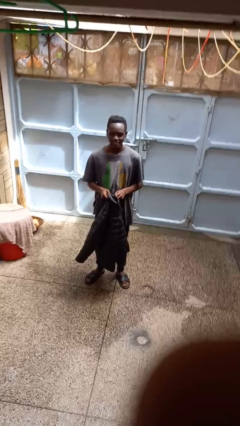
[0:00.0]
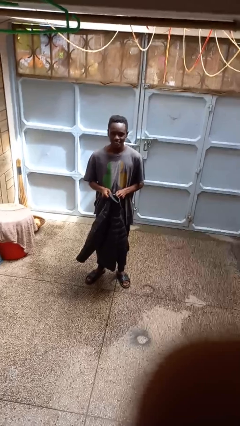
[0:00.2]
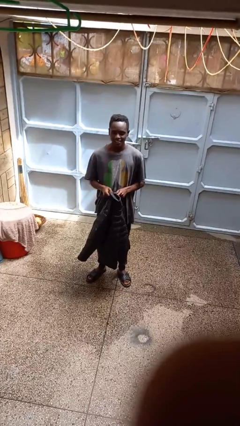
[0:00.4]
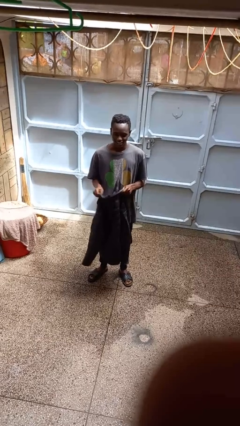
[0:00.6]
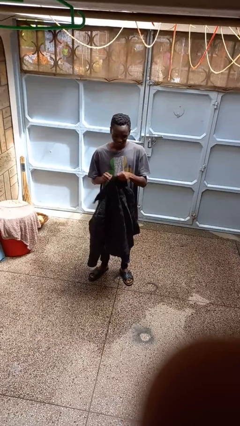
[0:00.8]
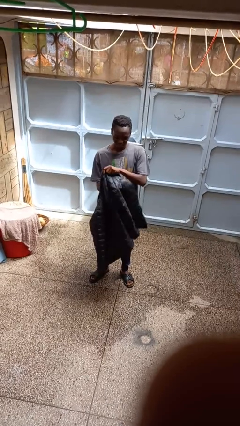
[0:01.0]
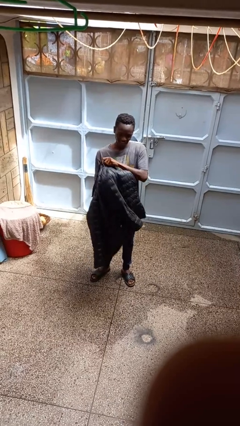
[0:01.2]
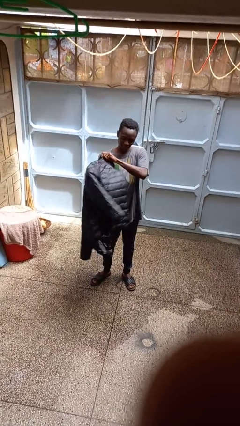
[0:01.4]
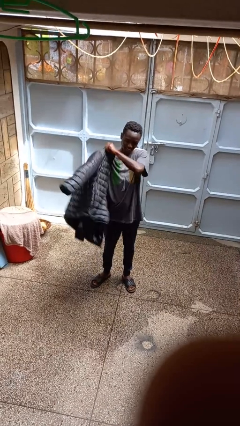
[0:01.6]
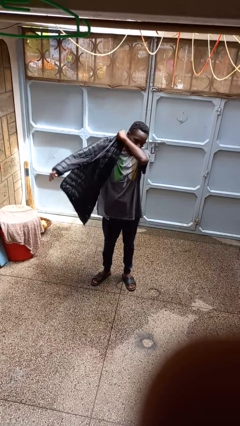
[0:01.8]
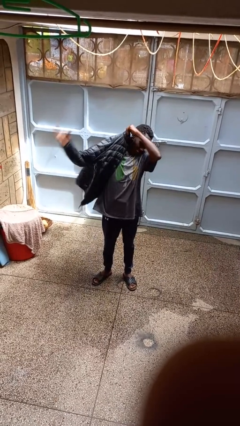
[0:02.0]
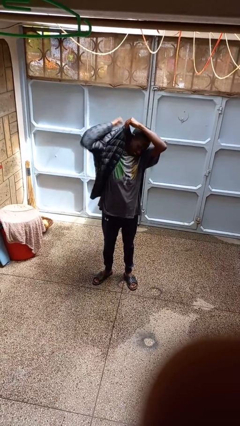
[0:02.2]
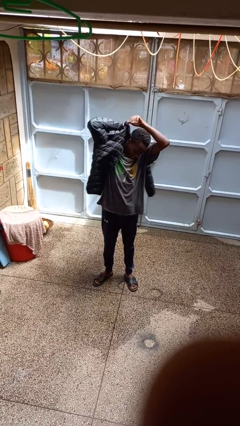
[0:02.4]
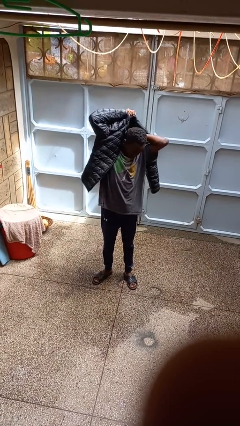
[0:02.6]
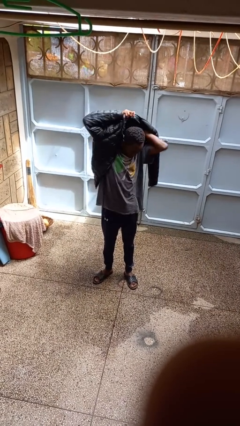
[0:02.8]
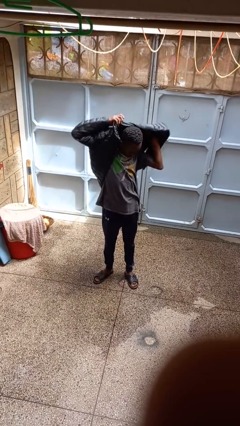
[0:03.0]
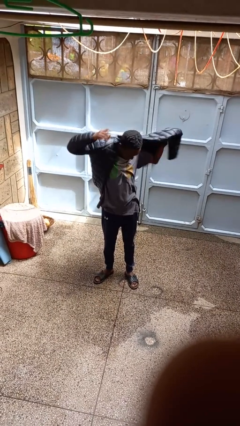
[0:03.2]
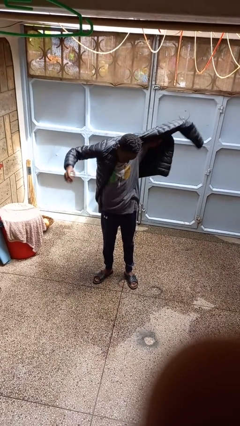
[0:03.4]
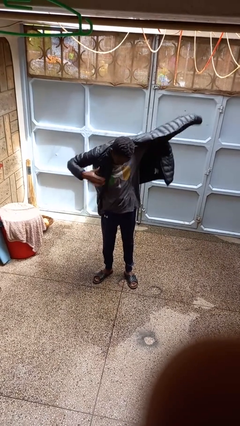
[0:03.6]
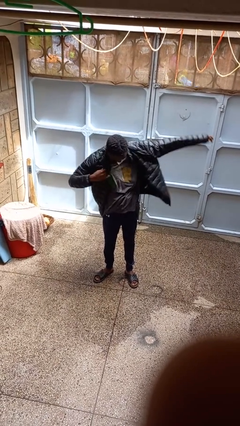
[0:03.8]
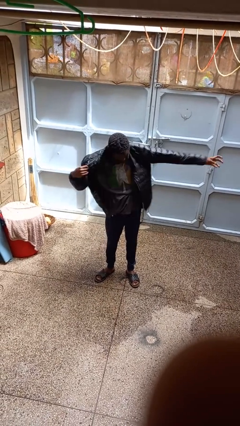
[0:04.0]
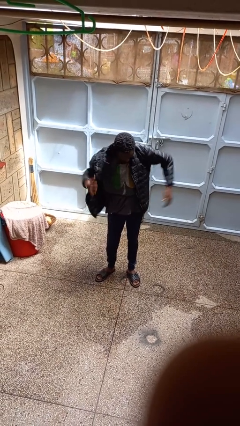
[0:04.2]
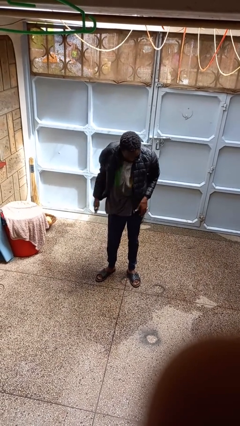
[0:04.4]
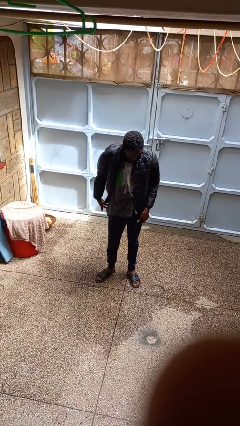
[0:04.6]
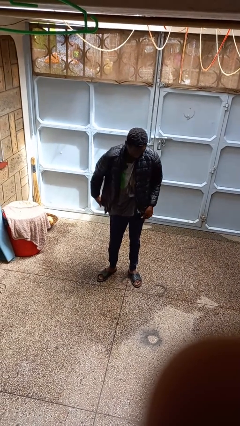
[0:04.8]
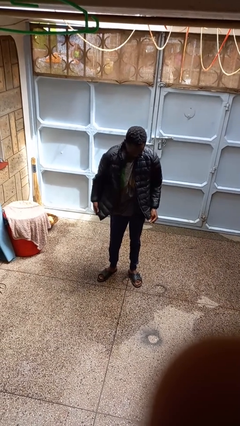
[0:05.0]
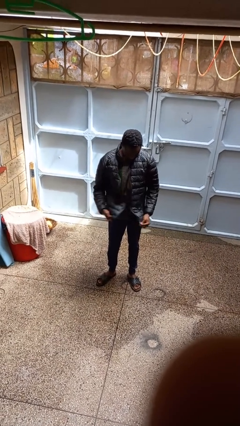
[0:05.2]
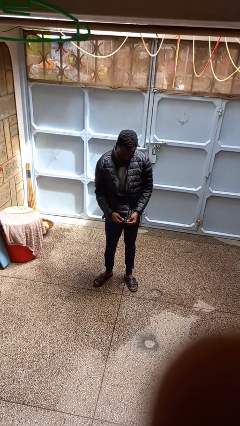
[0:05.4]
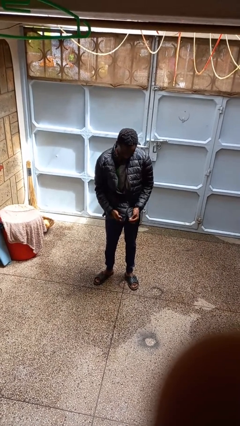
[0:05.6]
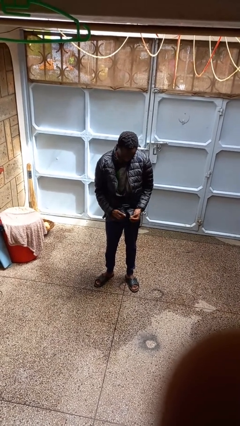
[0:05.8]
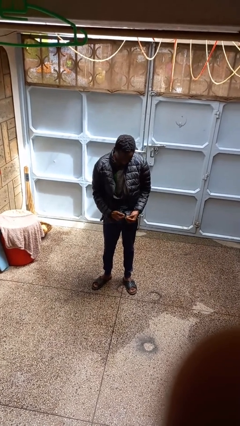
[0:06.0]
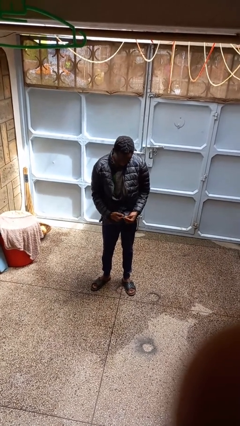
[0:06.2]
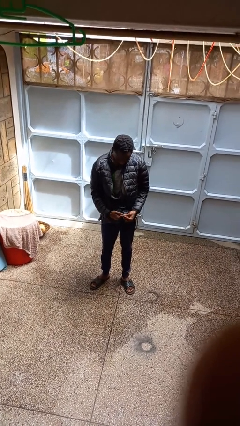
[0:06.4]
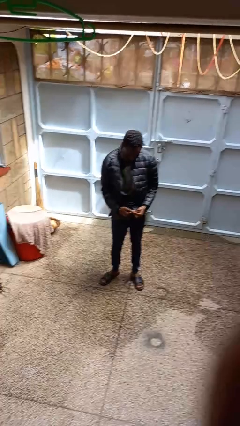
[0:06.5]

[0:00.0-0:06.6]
person puts on jacket

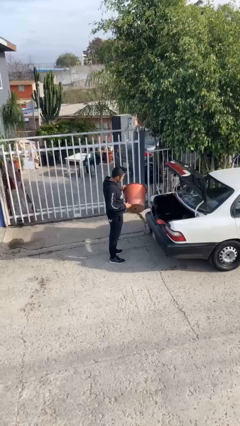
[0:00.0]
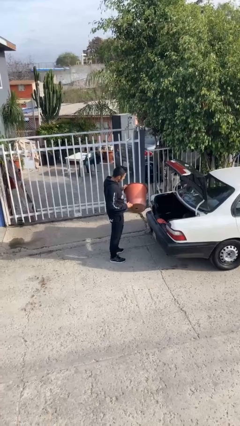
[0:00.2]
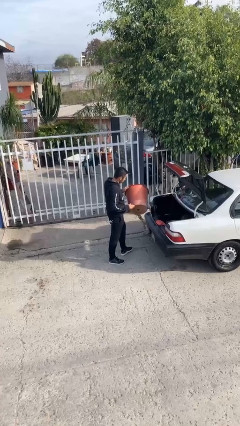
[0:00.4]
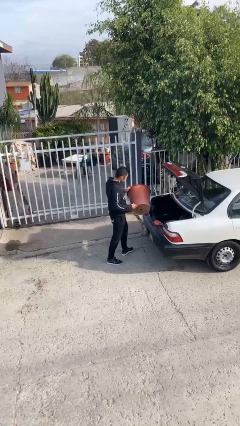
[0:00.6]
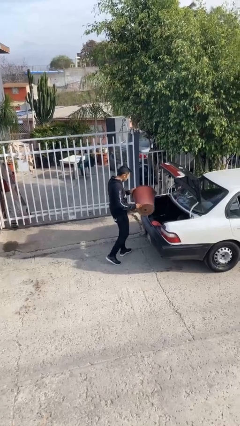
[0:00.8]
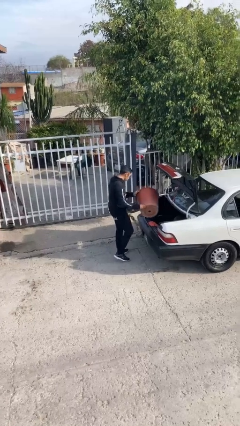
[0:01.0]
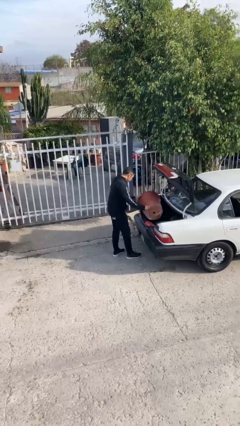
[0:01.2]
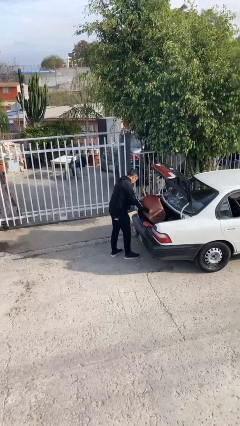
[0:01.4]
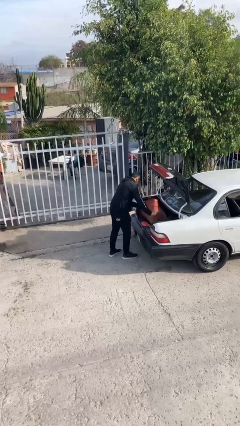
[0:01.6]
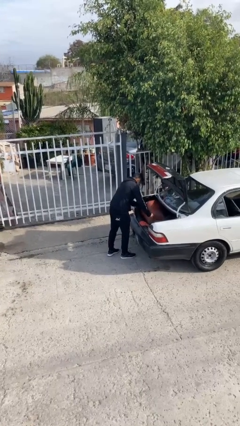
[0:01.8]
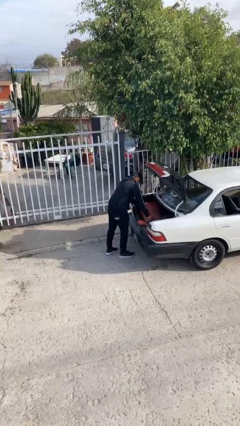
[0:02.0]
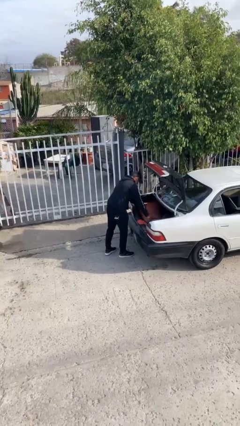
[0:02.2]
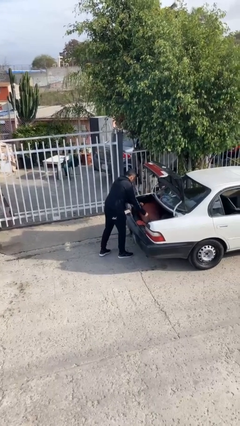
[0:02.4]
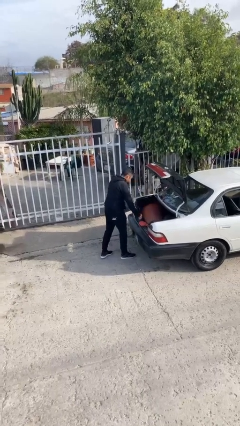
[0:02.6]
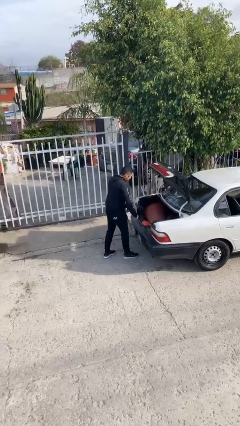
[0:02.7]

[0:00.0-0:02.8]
person loads car

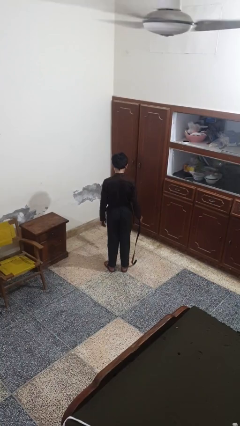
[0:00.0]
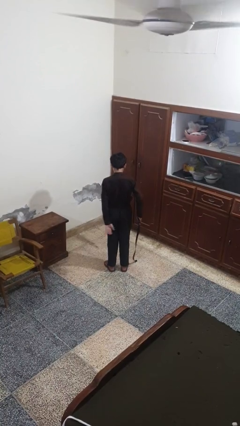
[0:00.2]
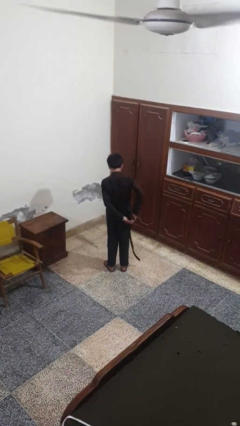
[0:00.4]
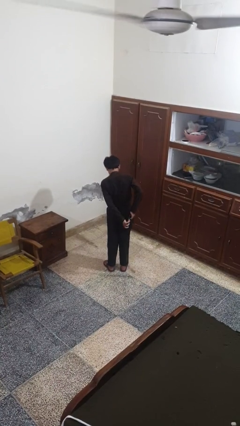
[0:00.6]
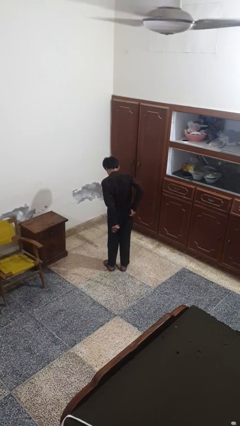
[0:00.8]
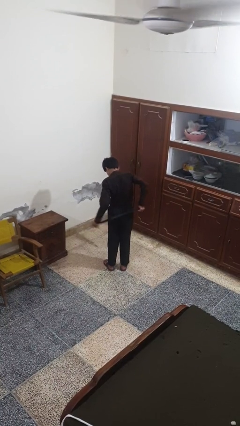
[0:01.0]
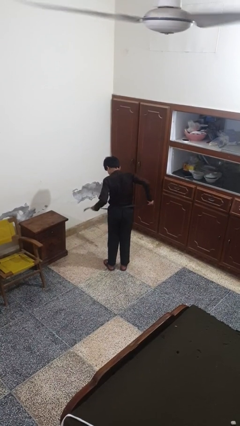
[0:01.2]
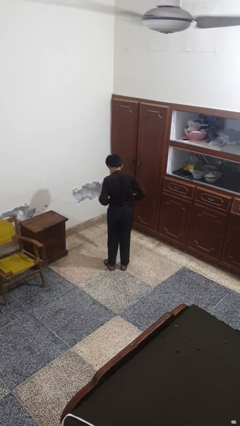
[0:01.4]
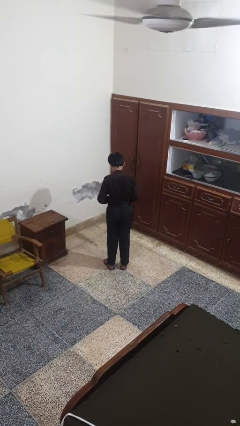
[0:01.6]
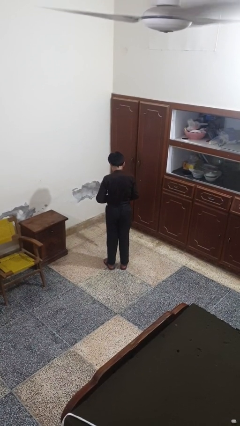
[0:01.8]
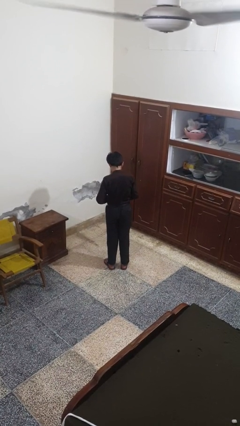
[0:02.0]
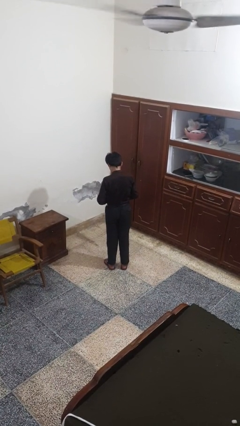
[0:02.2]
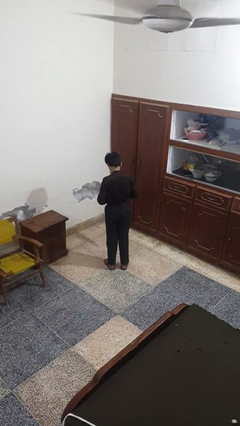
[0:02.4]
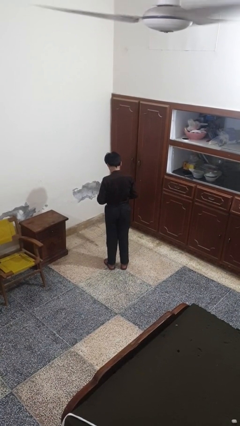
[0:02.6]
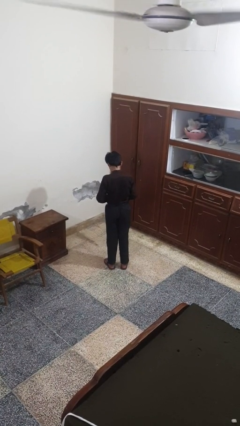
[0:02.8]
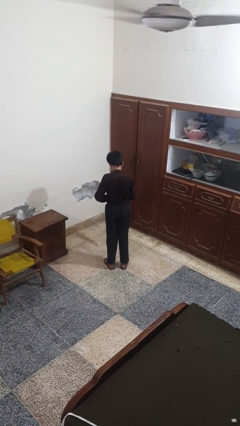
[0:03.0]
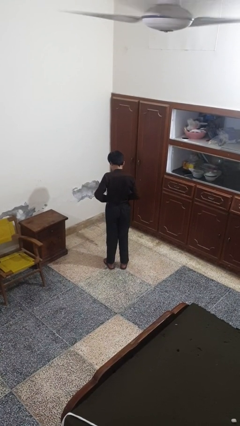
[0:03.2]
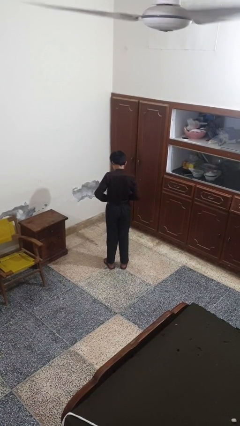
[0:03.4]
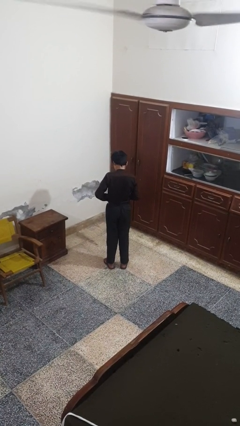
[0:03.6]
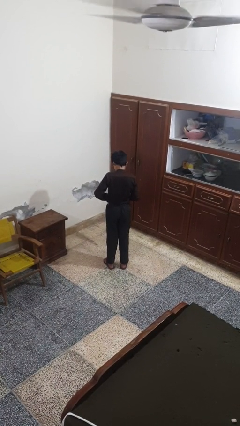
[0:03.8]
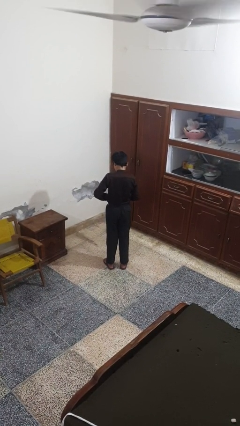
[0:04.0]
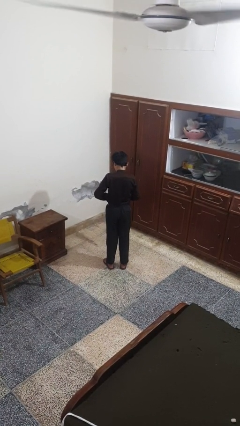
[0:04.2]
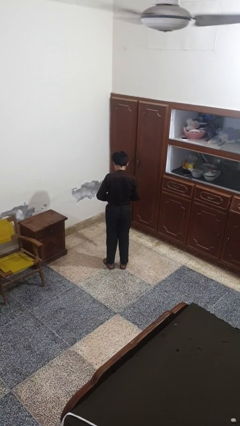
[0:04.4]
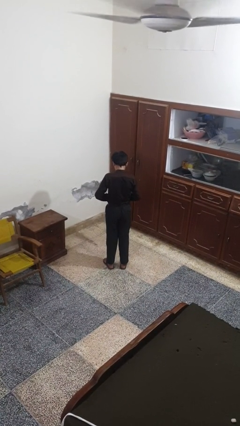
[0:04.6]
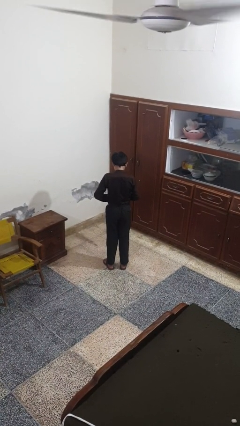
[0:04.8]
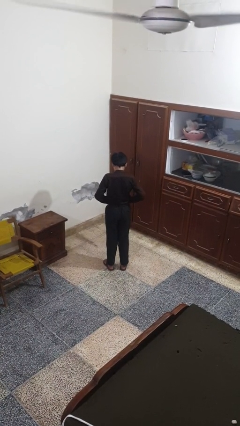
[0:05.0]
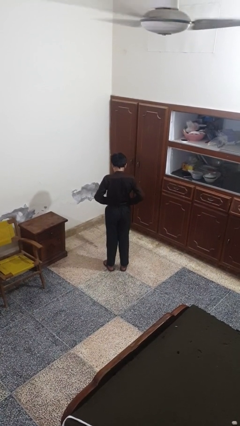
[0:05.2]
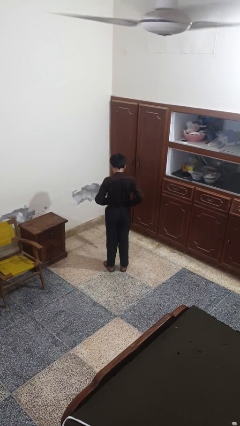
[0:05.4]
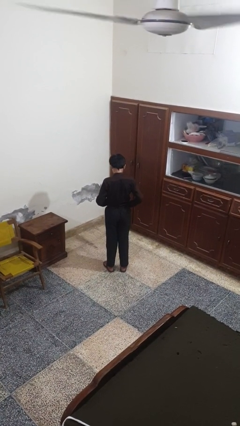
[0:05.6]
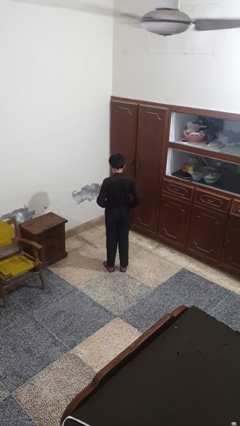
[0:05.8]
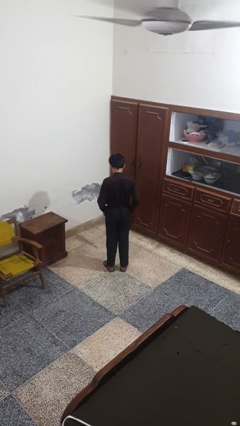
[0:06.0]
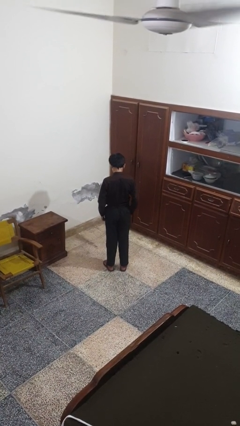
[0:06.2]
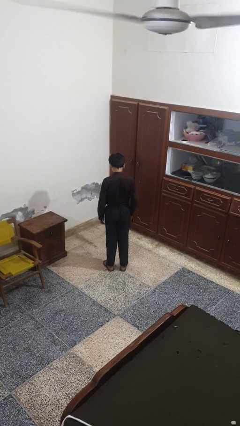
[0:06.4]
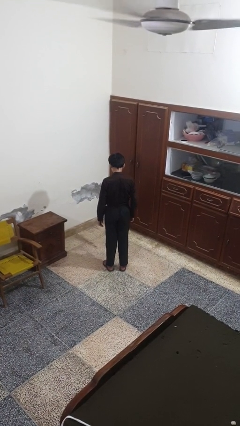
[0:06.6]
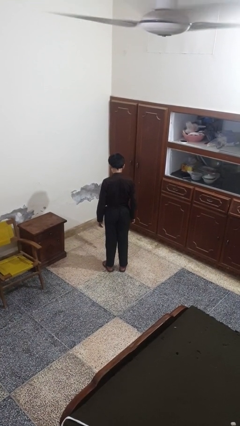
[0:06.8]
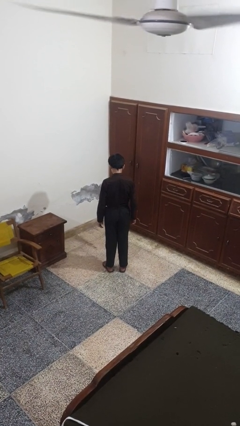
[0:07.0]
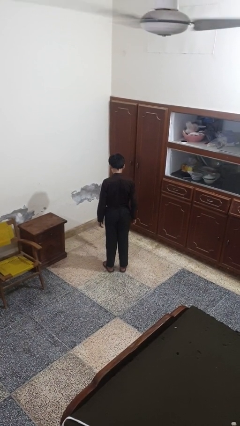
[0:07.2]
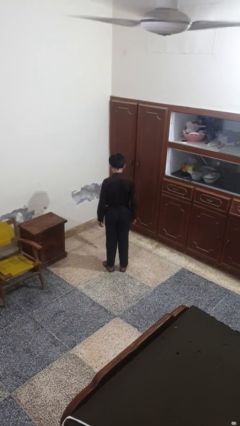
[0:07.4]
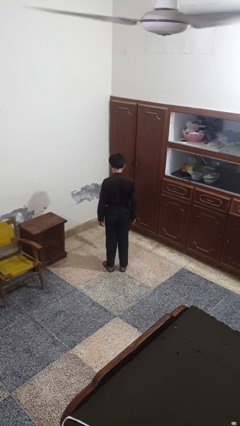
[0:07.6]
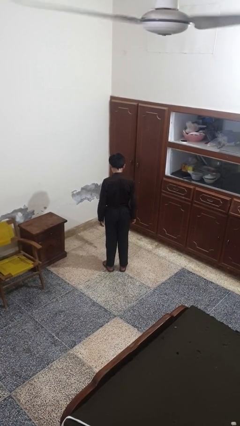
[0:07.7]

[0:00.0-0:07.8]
person puts on belt

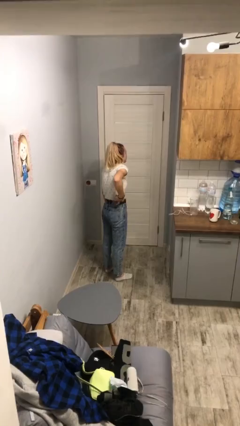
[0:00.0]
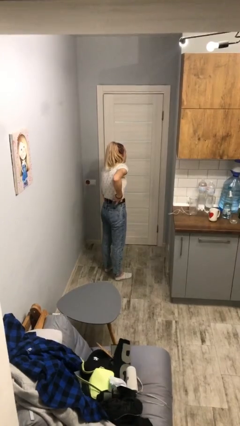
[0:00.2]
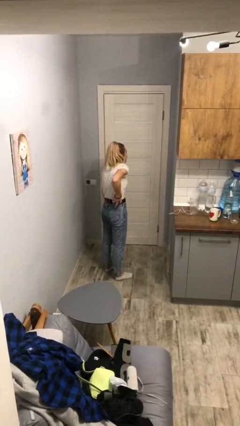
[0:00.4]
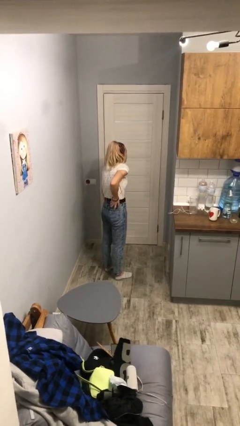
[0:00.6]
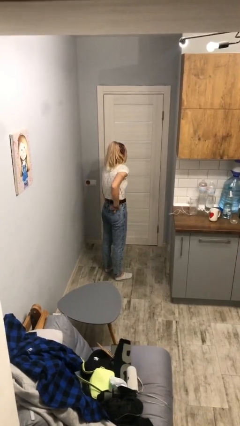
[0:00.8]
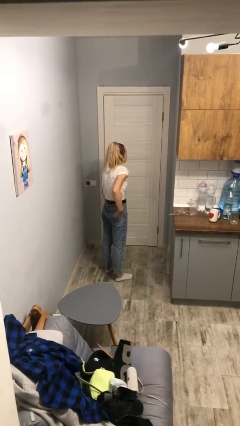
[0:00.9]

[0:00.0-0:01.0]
person puts phone into pocket
